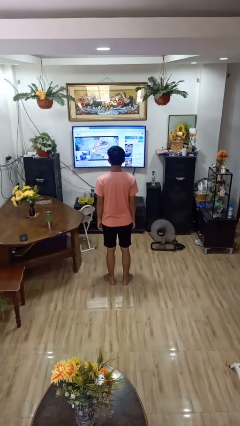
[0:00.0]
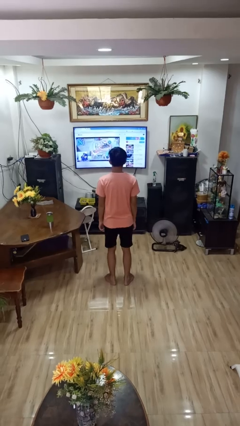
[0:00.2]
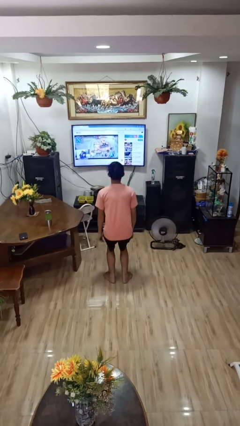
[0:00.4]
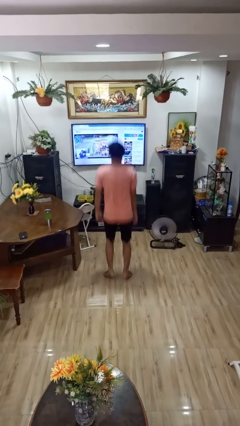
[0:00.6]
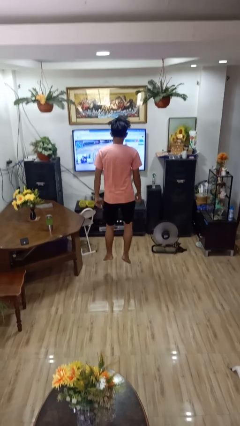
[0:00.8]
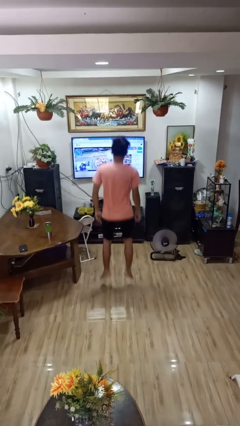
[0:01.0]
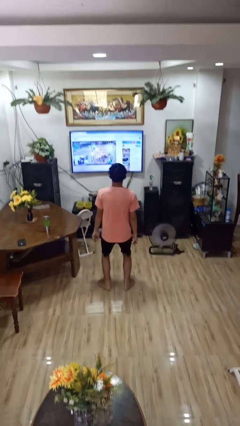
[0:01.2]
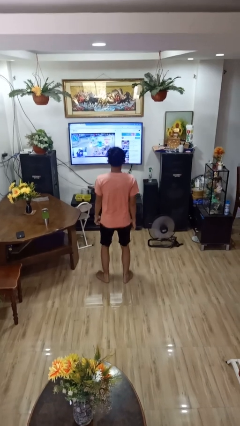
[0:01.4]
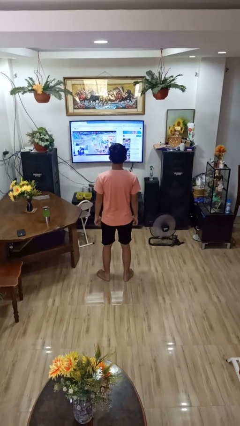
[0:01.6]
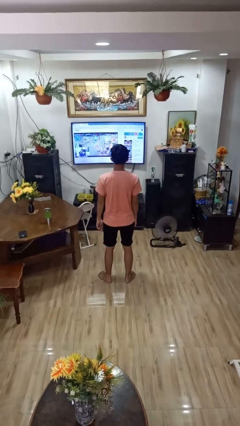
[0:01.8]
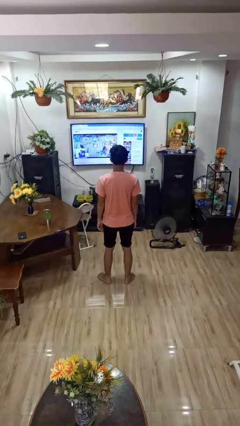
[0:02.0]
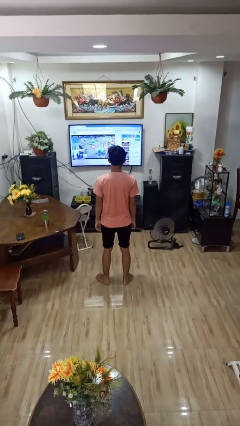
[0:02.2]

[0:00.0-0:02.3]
person jumps

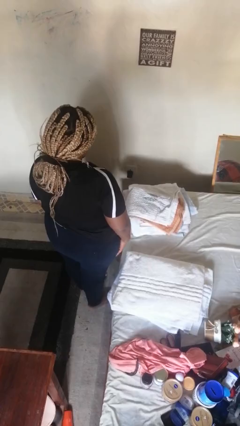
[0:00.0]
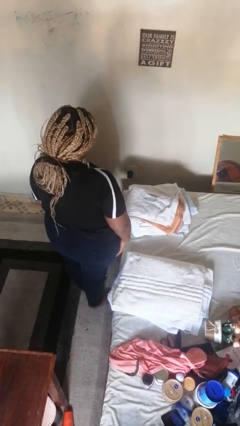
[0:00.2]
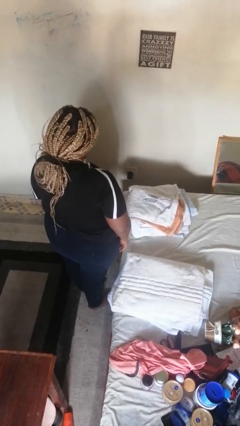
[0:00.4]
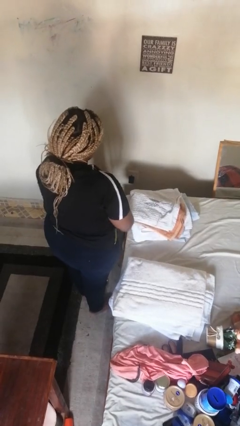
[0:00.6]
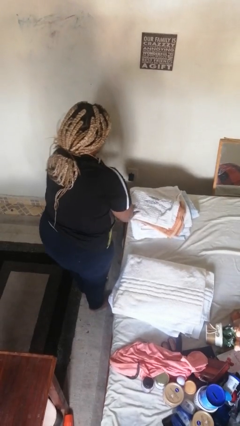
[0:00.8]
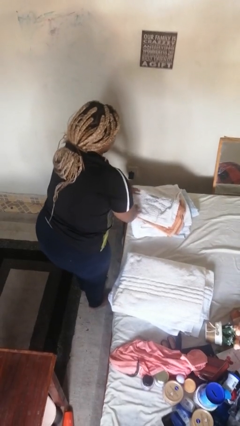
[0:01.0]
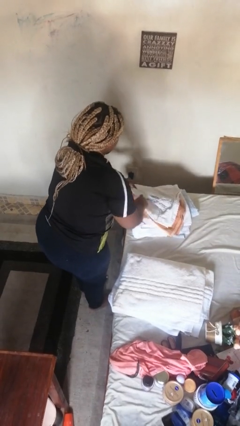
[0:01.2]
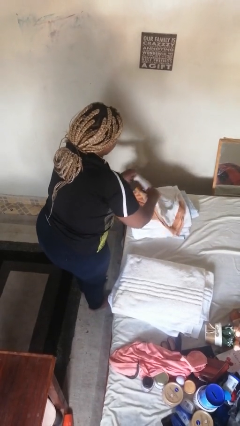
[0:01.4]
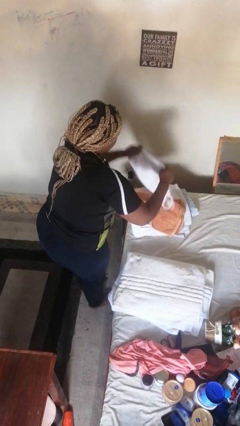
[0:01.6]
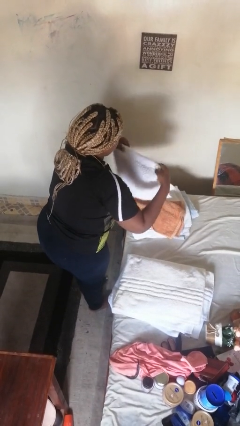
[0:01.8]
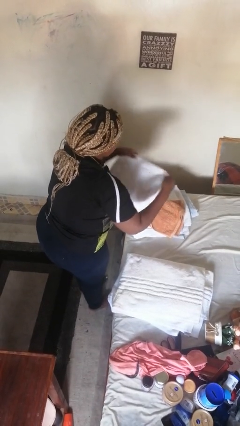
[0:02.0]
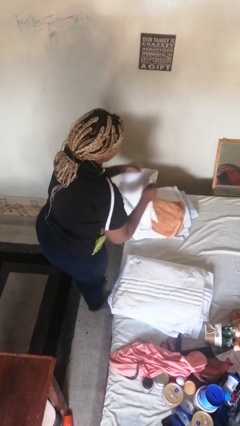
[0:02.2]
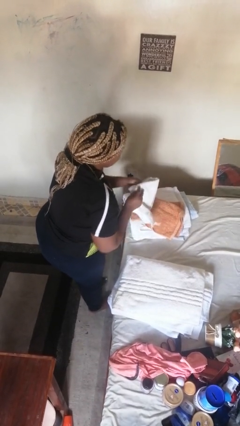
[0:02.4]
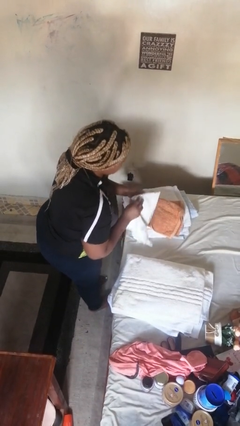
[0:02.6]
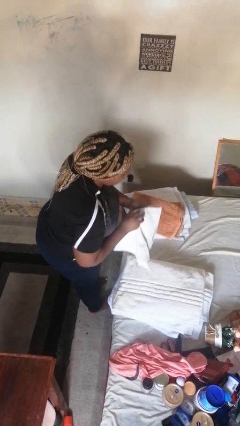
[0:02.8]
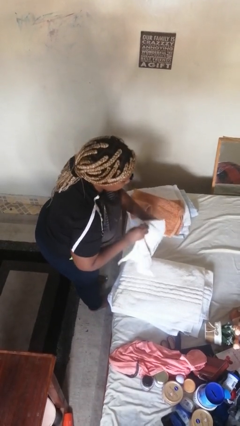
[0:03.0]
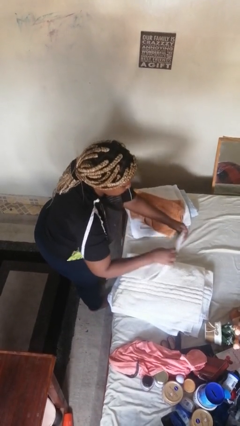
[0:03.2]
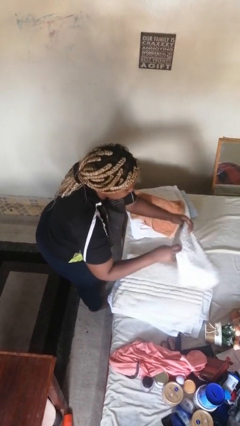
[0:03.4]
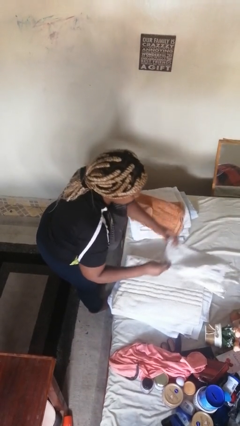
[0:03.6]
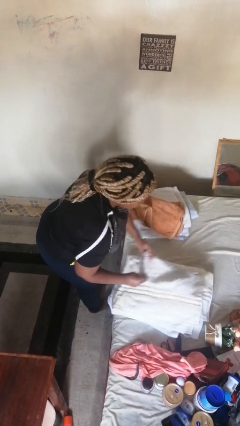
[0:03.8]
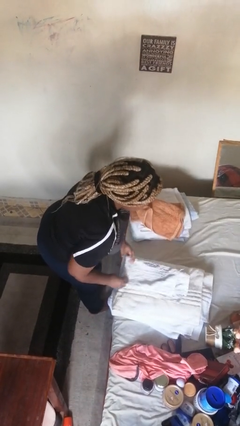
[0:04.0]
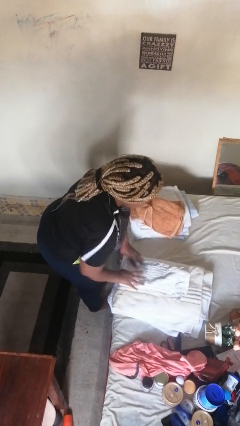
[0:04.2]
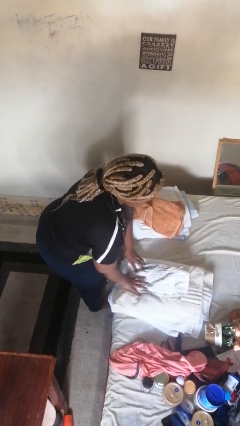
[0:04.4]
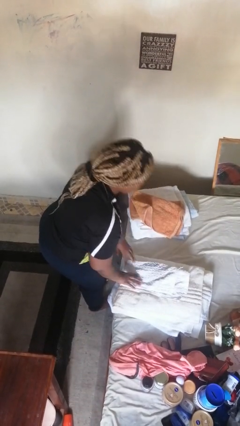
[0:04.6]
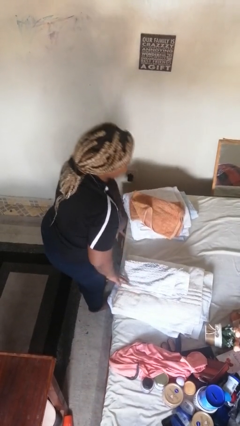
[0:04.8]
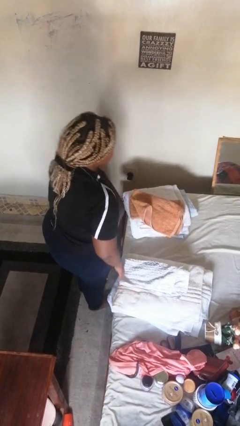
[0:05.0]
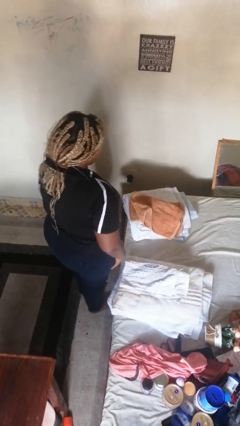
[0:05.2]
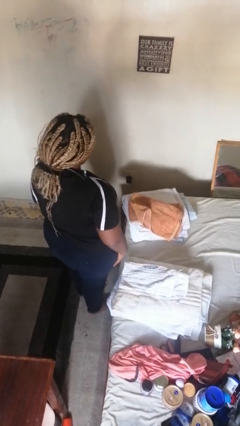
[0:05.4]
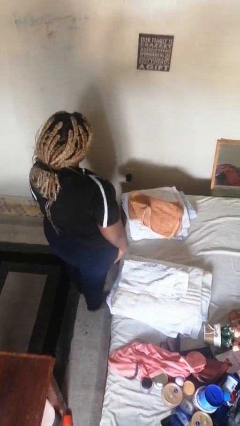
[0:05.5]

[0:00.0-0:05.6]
person folds towel

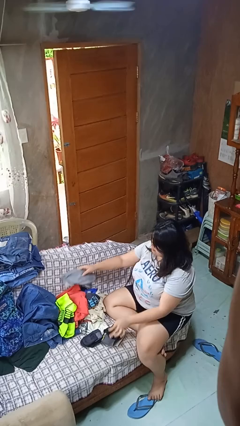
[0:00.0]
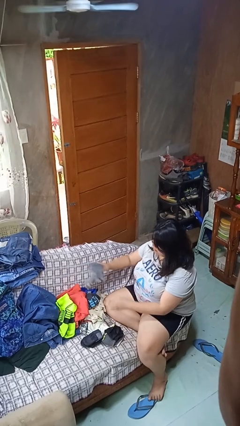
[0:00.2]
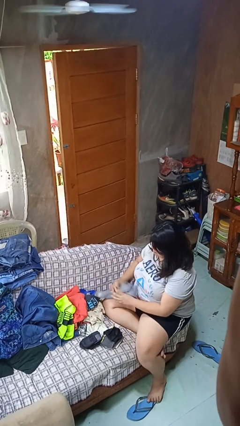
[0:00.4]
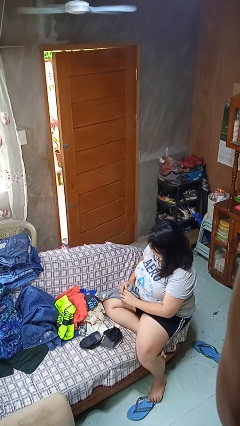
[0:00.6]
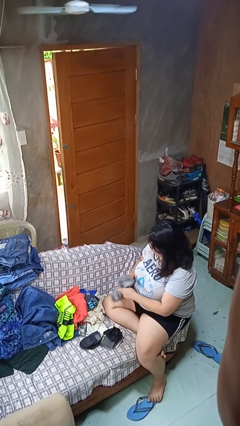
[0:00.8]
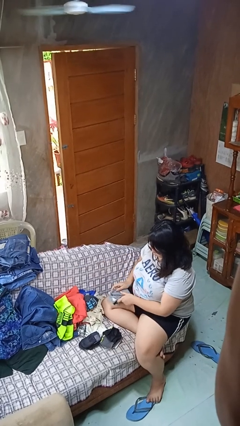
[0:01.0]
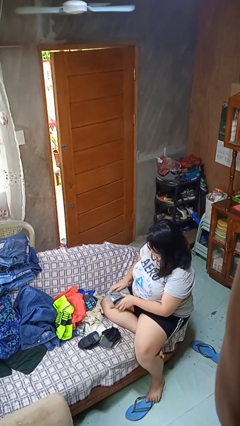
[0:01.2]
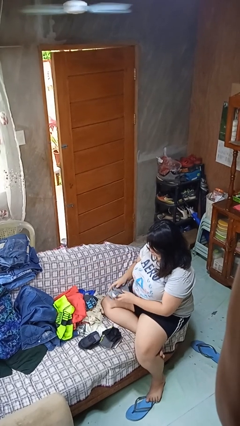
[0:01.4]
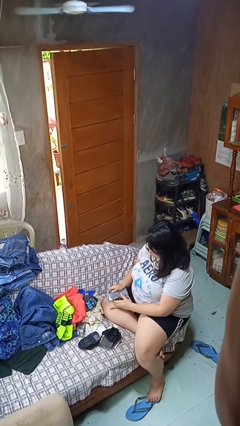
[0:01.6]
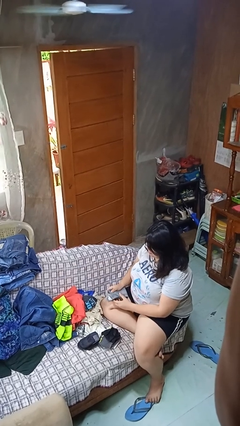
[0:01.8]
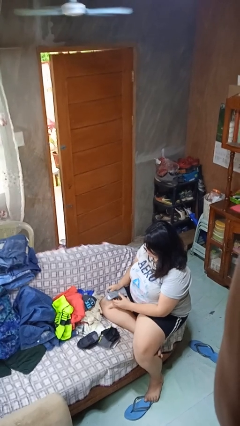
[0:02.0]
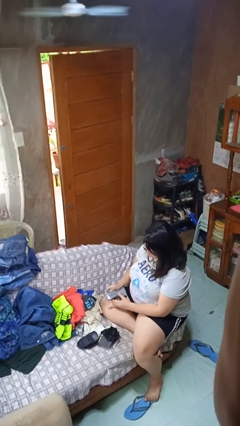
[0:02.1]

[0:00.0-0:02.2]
person folds socks

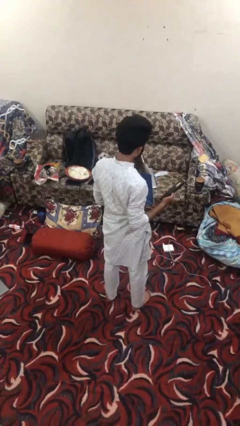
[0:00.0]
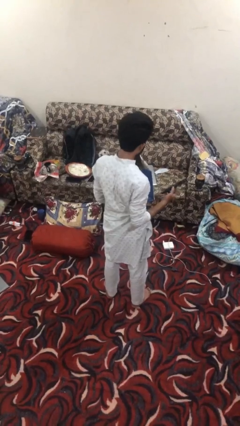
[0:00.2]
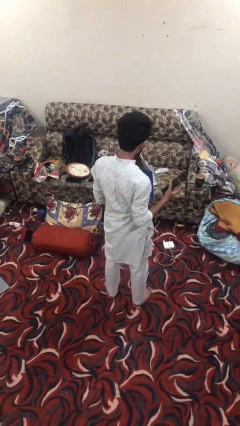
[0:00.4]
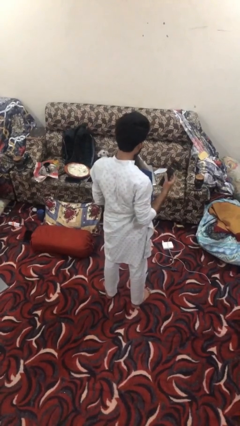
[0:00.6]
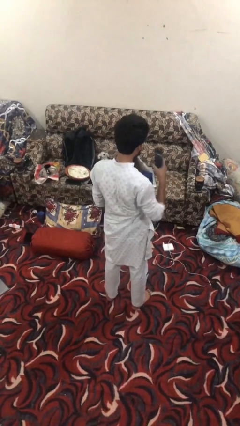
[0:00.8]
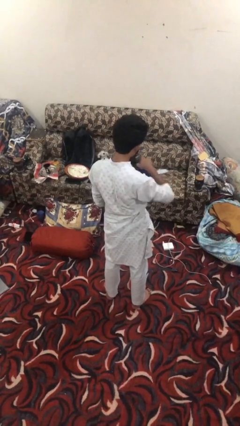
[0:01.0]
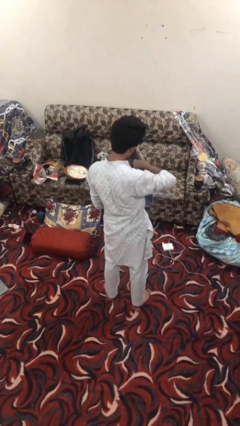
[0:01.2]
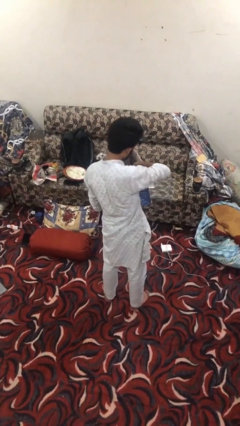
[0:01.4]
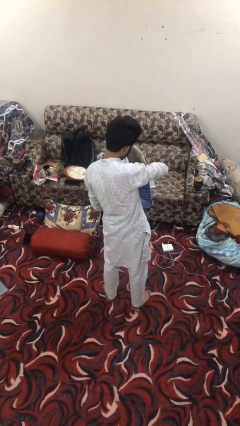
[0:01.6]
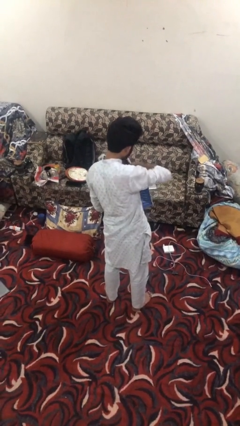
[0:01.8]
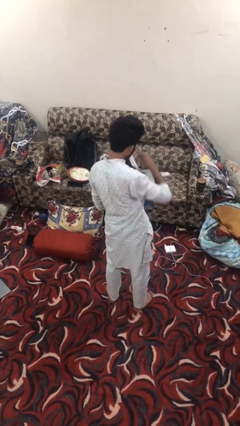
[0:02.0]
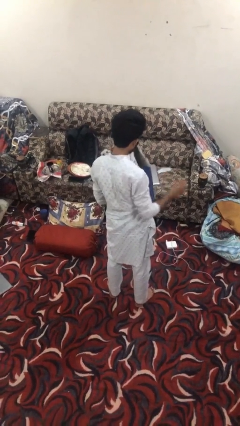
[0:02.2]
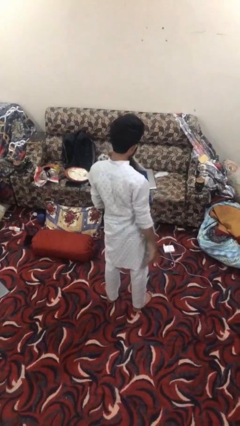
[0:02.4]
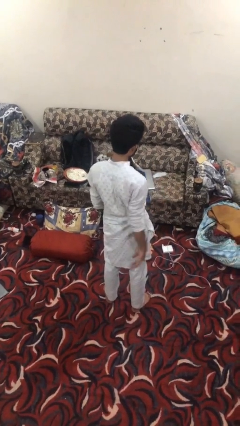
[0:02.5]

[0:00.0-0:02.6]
person puts object into bag

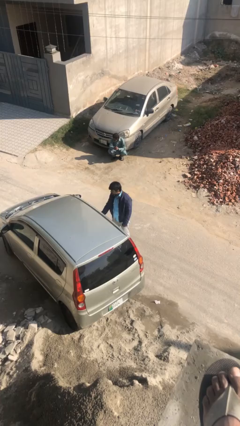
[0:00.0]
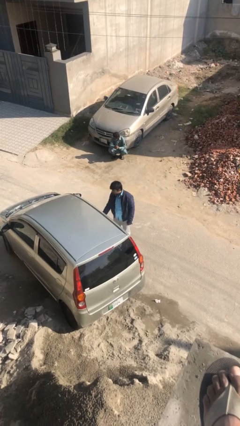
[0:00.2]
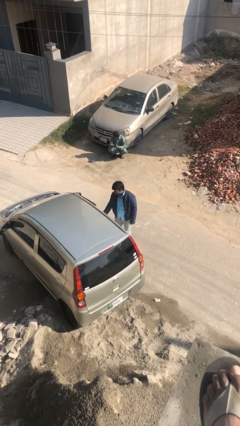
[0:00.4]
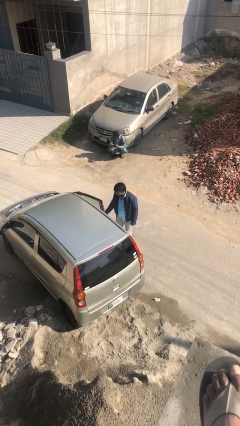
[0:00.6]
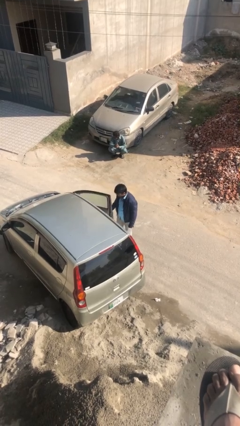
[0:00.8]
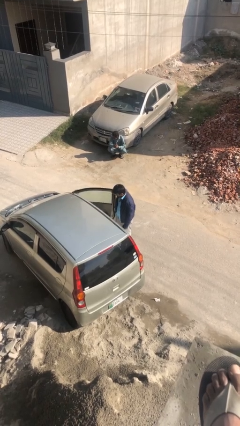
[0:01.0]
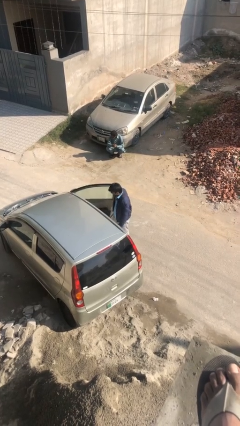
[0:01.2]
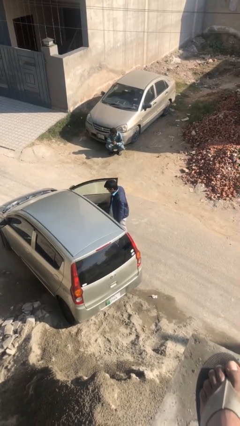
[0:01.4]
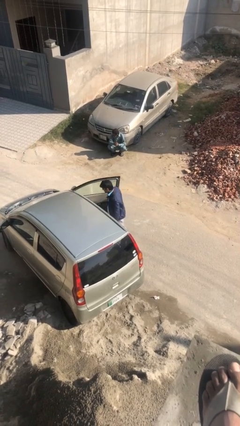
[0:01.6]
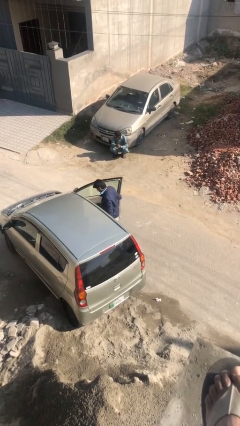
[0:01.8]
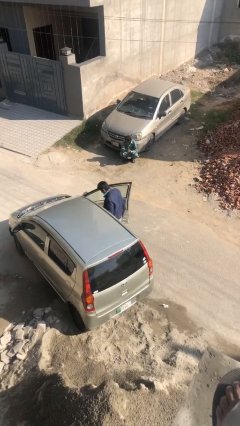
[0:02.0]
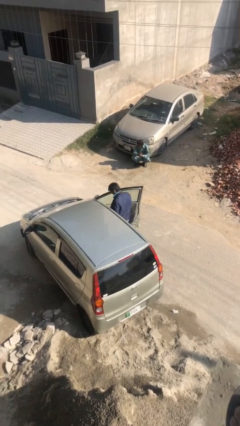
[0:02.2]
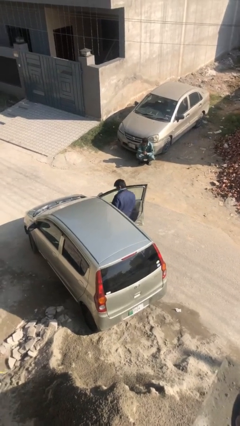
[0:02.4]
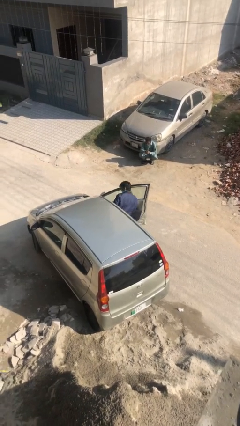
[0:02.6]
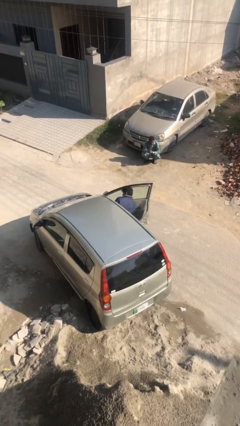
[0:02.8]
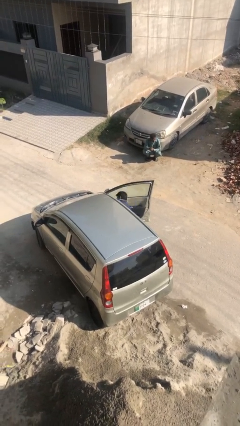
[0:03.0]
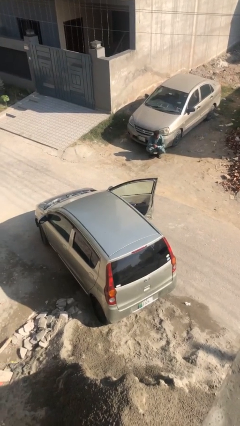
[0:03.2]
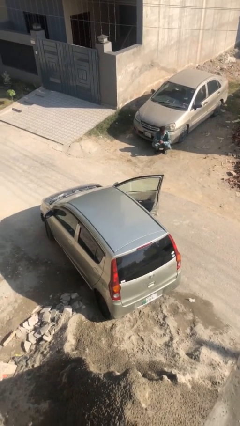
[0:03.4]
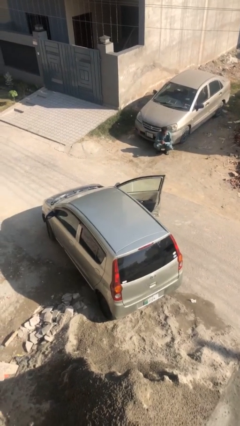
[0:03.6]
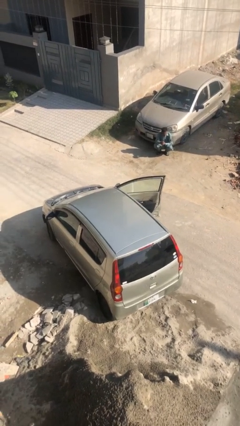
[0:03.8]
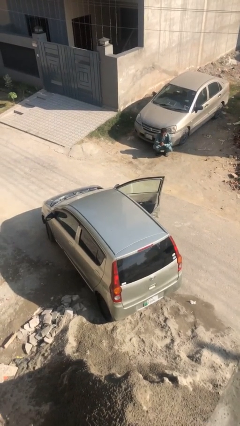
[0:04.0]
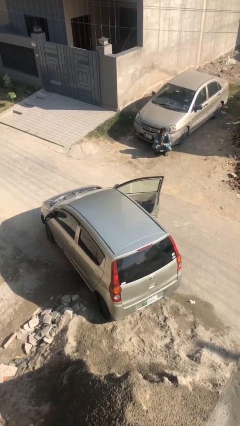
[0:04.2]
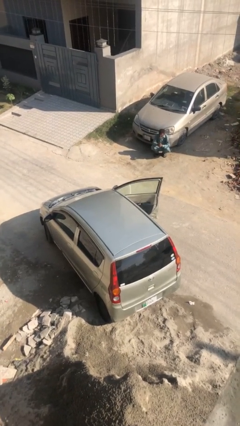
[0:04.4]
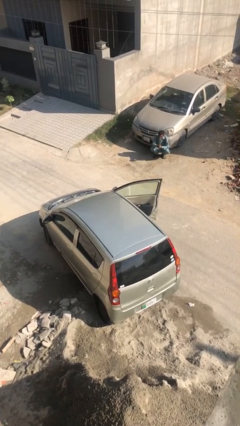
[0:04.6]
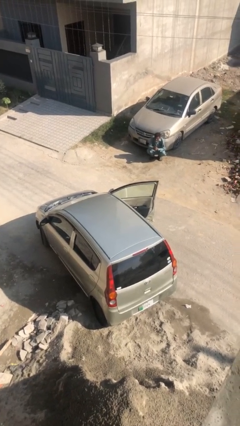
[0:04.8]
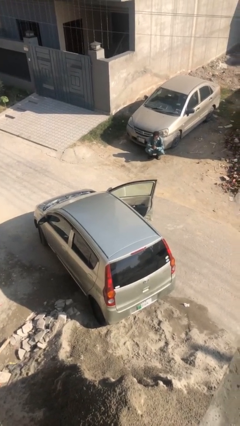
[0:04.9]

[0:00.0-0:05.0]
person enters car

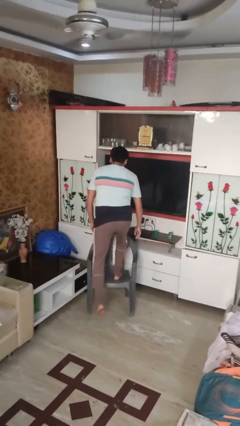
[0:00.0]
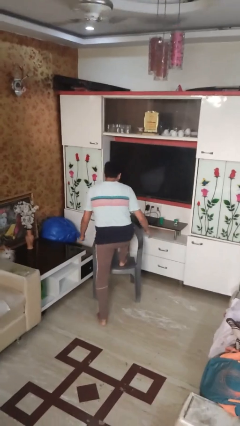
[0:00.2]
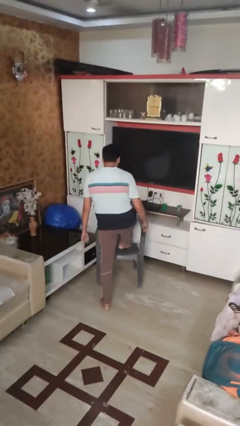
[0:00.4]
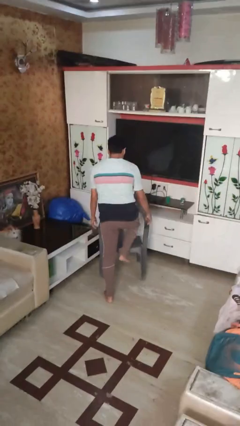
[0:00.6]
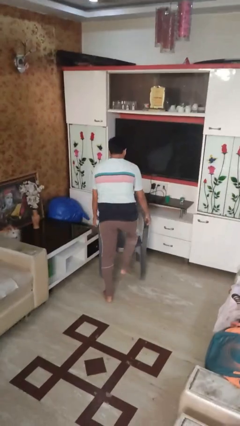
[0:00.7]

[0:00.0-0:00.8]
person climbs off chair
